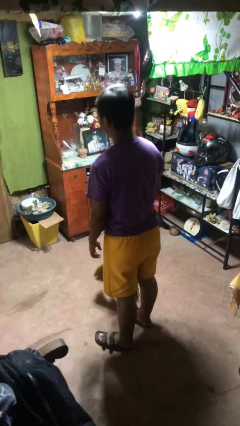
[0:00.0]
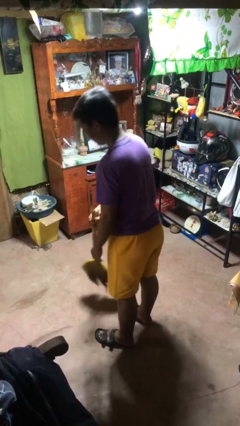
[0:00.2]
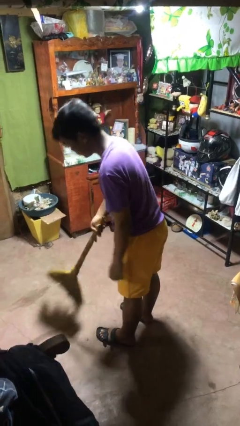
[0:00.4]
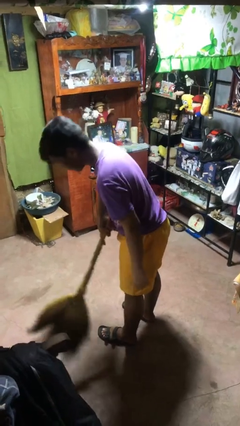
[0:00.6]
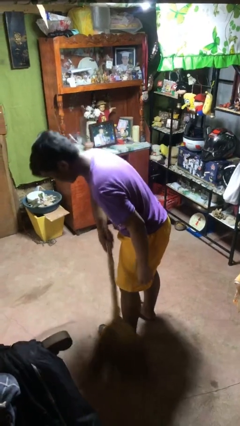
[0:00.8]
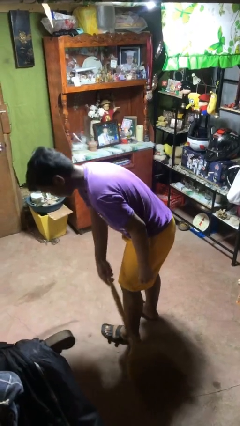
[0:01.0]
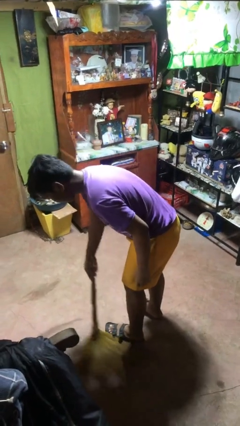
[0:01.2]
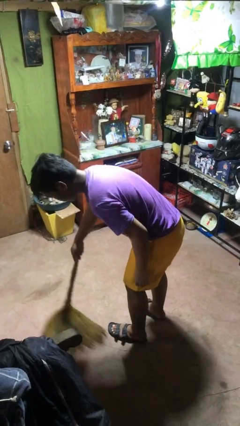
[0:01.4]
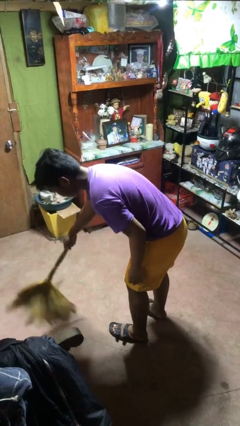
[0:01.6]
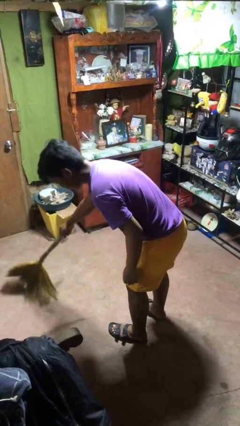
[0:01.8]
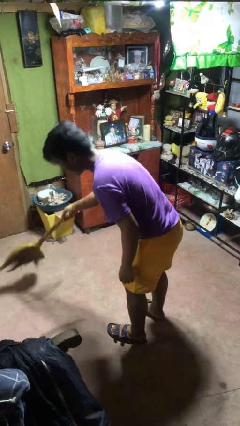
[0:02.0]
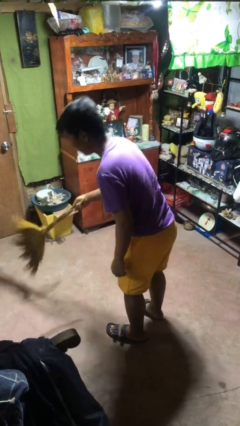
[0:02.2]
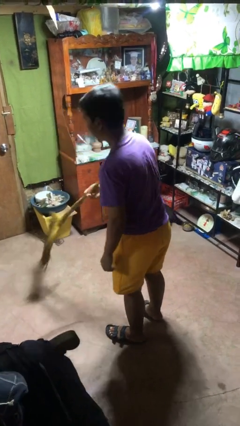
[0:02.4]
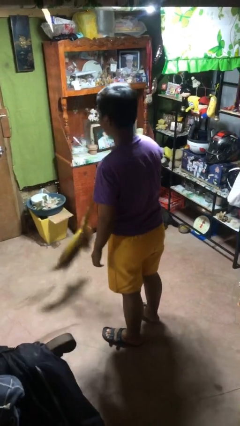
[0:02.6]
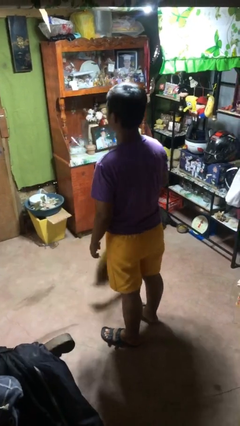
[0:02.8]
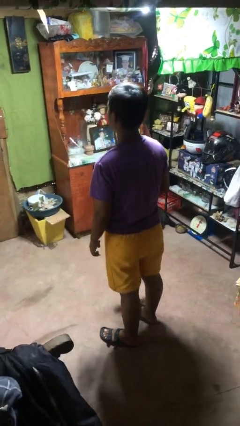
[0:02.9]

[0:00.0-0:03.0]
person sweeps floor

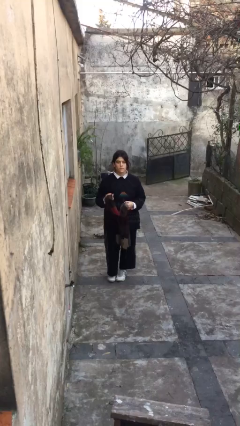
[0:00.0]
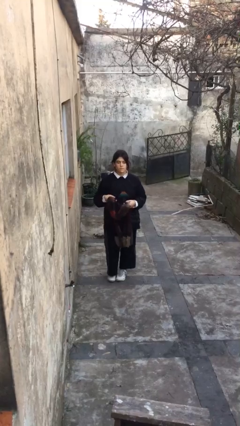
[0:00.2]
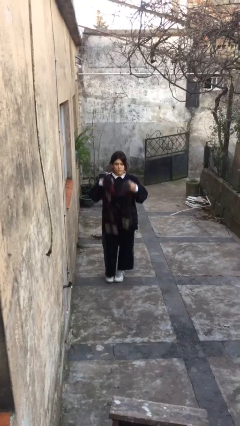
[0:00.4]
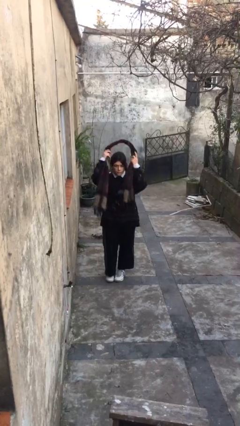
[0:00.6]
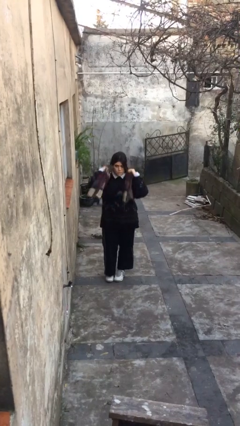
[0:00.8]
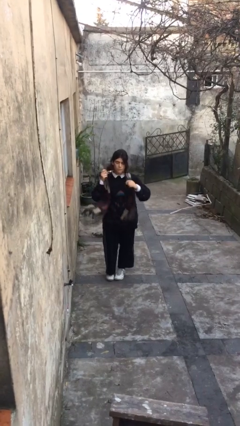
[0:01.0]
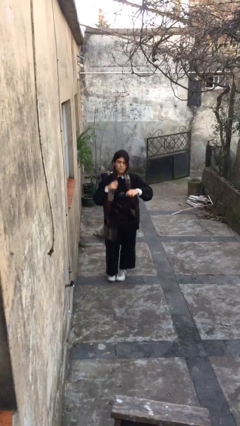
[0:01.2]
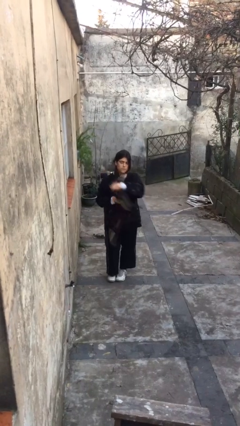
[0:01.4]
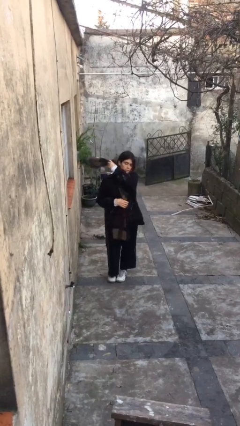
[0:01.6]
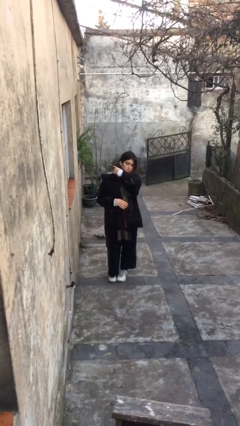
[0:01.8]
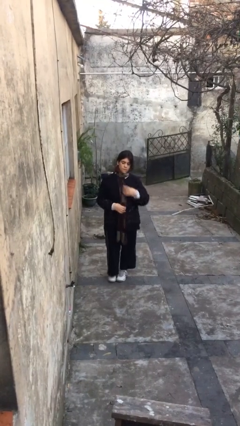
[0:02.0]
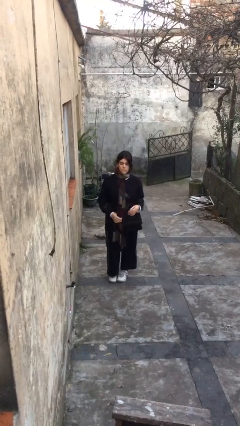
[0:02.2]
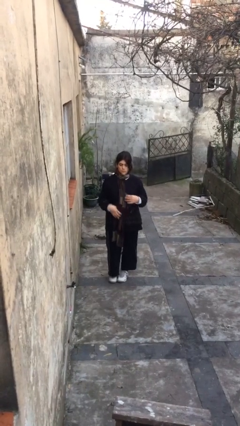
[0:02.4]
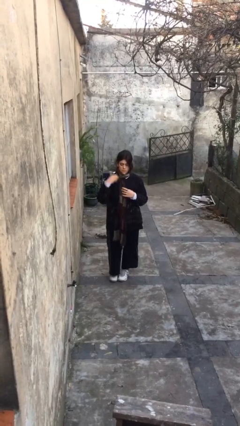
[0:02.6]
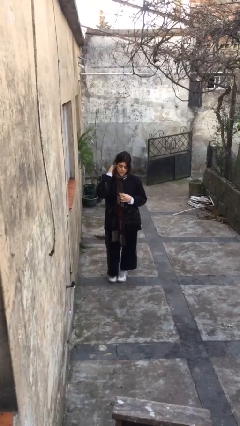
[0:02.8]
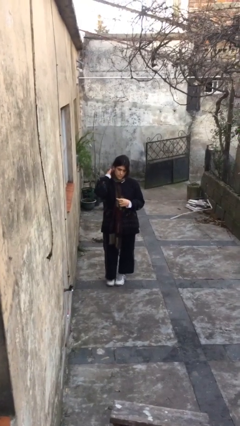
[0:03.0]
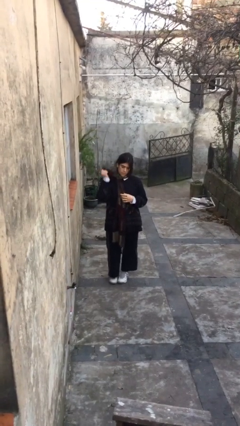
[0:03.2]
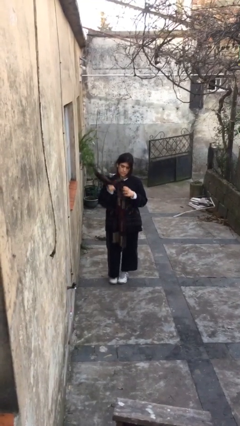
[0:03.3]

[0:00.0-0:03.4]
person puts on scarf

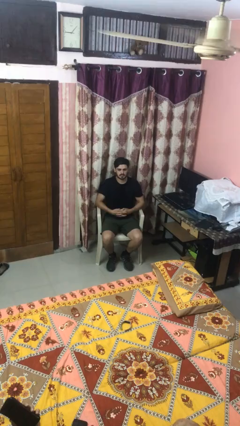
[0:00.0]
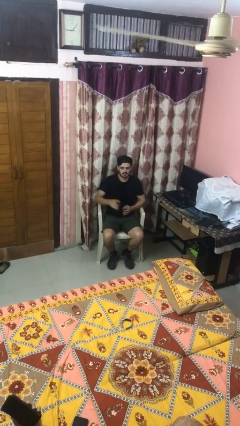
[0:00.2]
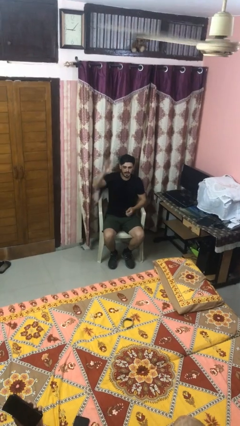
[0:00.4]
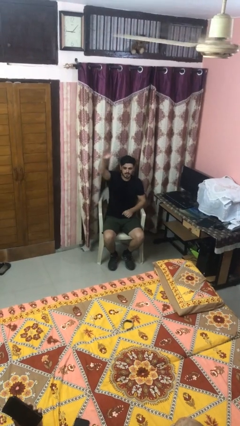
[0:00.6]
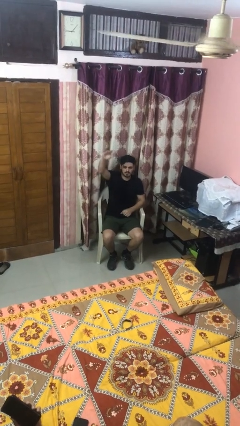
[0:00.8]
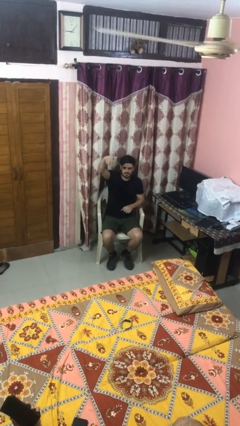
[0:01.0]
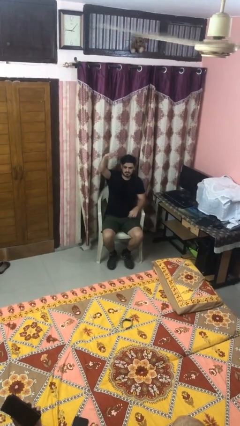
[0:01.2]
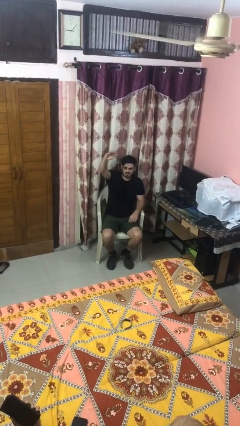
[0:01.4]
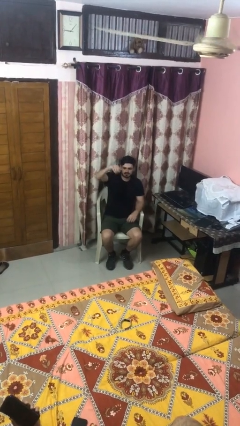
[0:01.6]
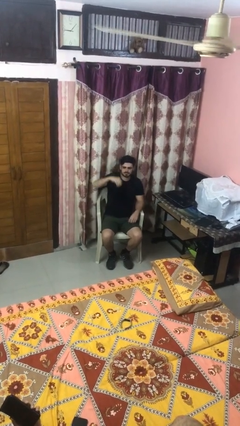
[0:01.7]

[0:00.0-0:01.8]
person gestures come here

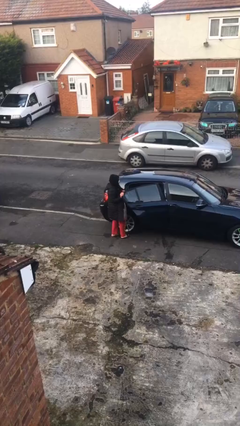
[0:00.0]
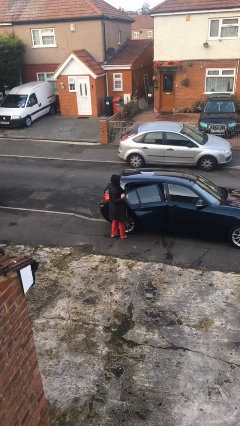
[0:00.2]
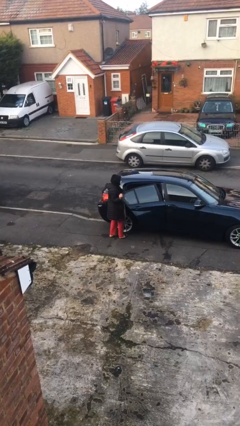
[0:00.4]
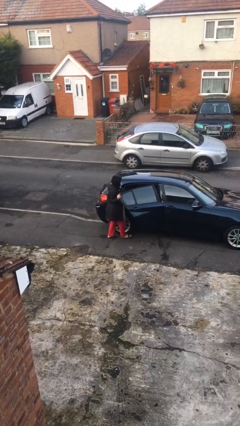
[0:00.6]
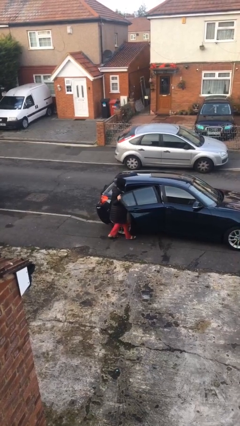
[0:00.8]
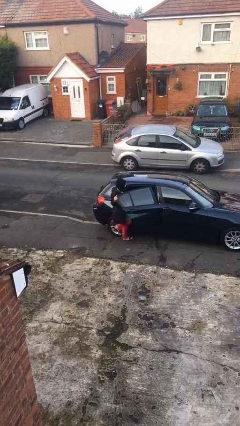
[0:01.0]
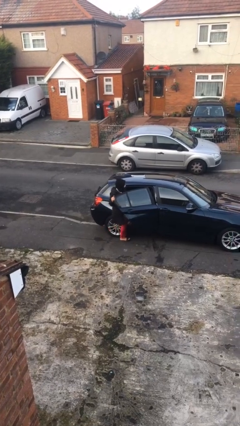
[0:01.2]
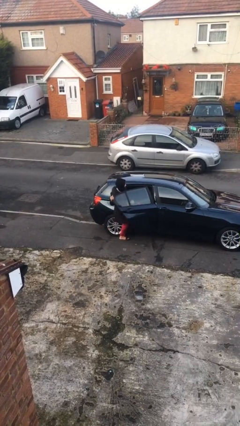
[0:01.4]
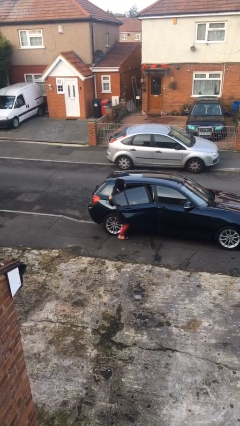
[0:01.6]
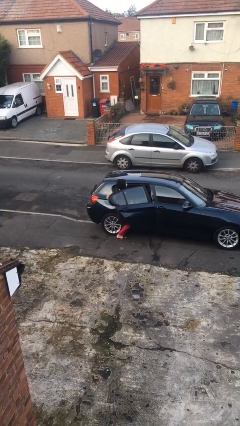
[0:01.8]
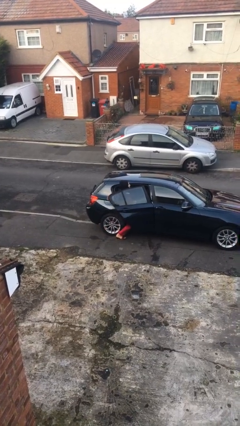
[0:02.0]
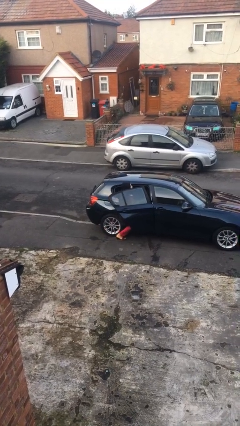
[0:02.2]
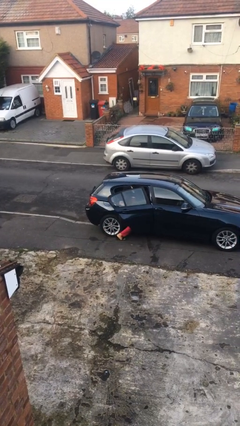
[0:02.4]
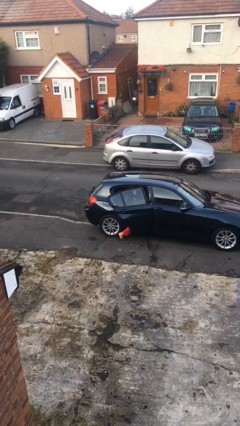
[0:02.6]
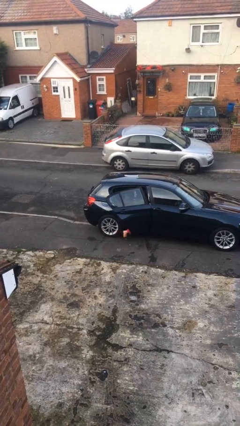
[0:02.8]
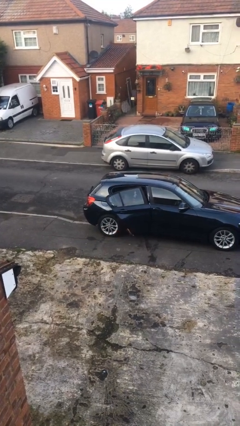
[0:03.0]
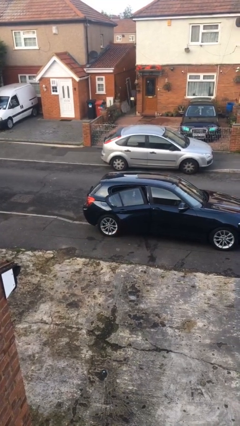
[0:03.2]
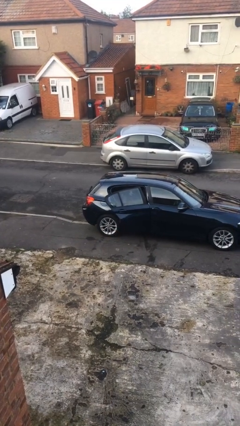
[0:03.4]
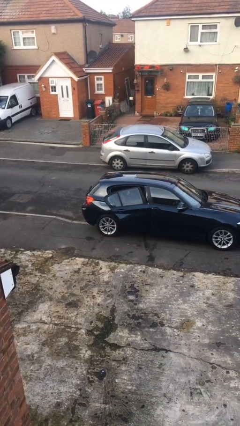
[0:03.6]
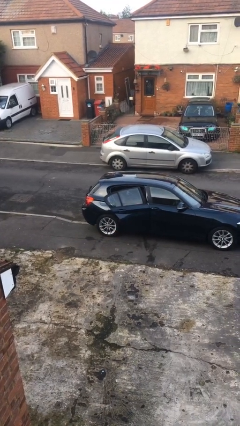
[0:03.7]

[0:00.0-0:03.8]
person enters car

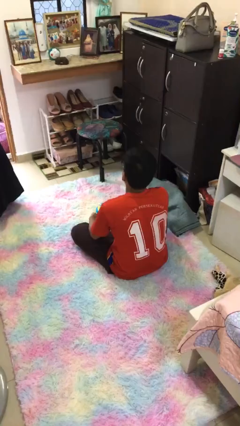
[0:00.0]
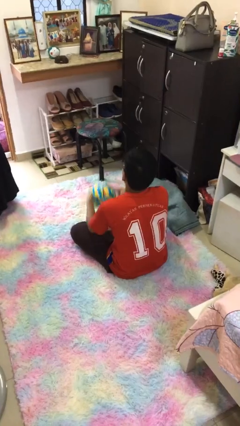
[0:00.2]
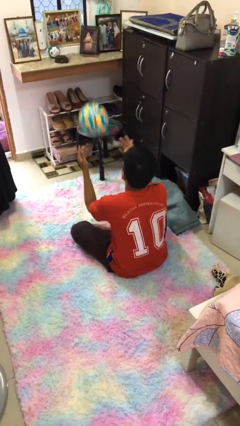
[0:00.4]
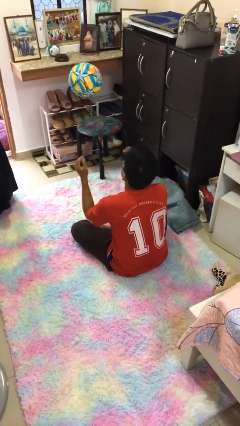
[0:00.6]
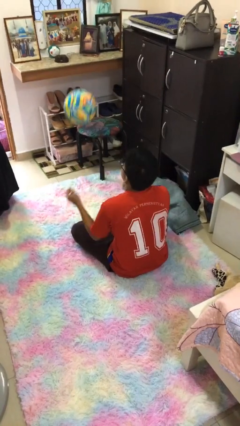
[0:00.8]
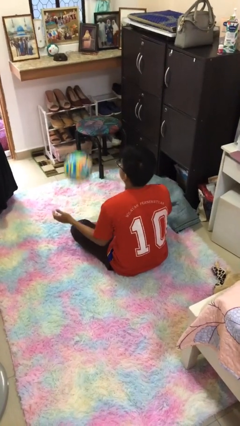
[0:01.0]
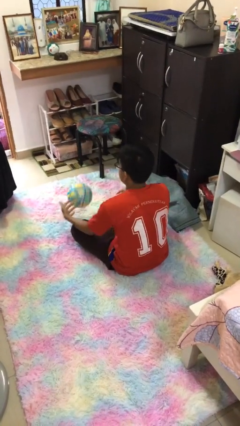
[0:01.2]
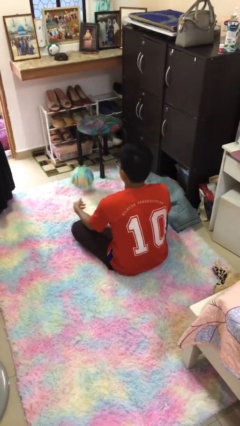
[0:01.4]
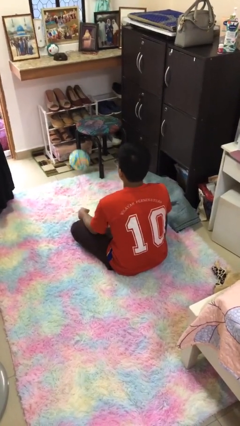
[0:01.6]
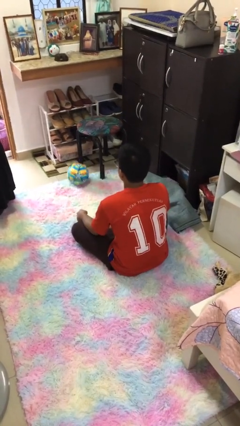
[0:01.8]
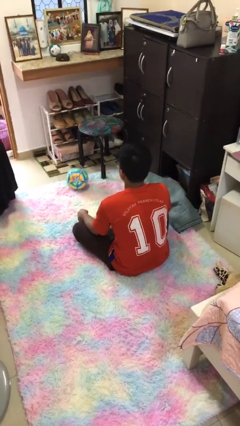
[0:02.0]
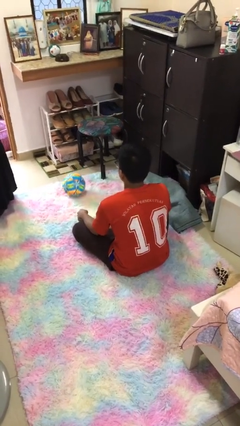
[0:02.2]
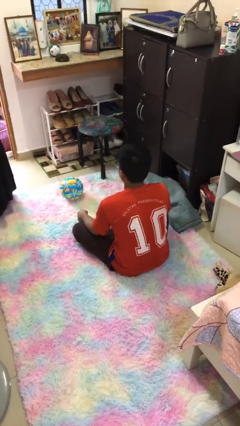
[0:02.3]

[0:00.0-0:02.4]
person bounces ball on floor

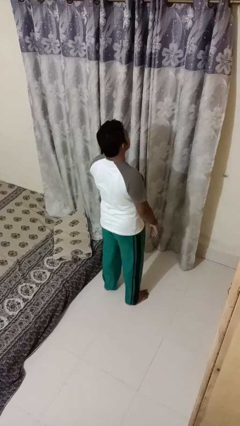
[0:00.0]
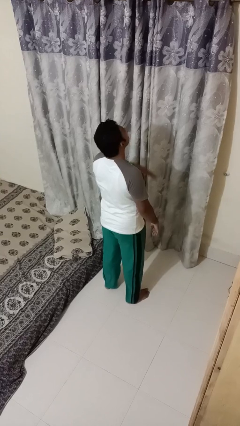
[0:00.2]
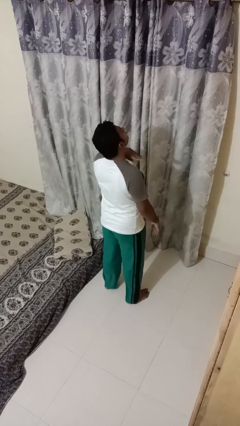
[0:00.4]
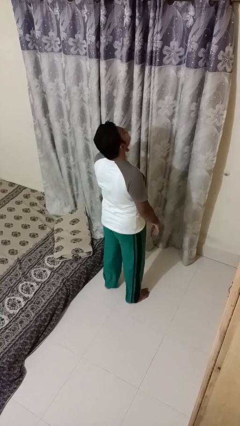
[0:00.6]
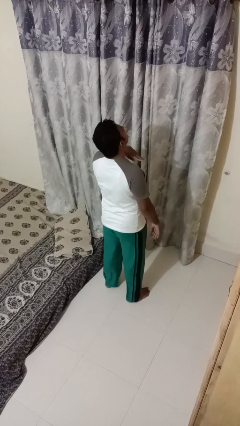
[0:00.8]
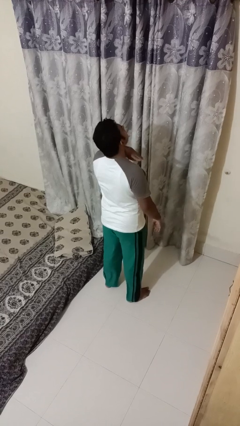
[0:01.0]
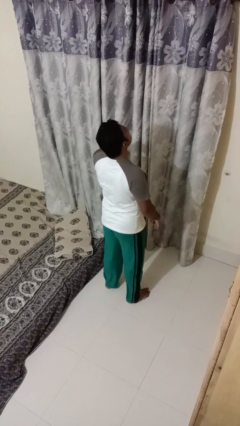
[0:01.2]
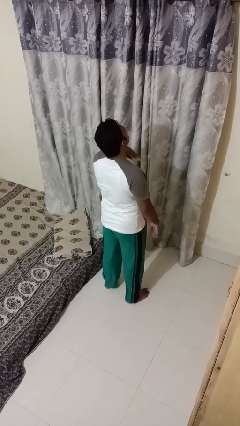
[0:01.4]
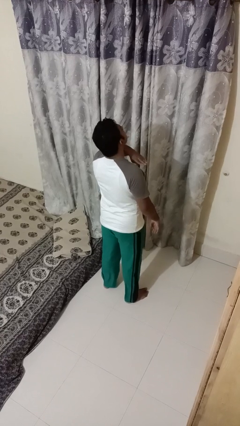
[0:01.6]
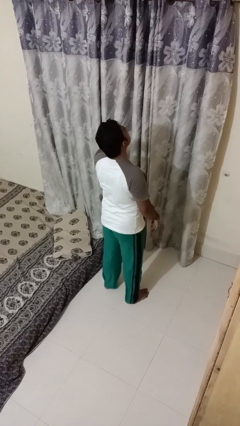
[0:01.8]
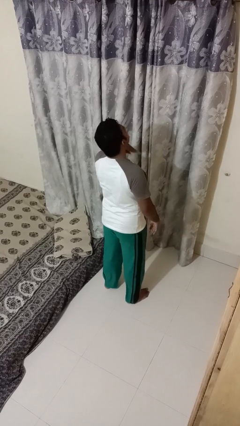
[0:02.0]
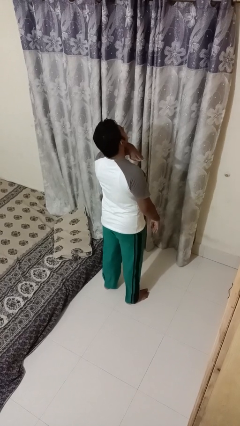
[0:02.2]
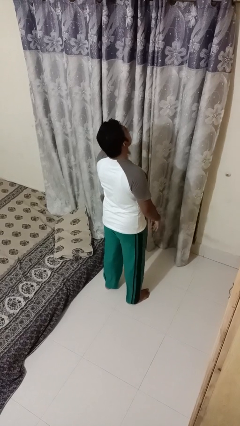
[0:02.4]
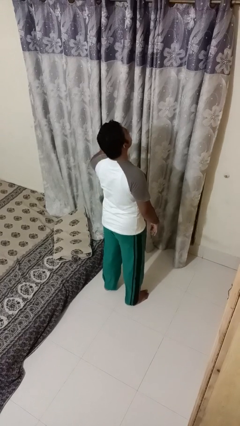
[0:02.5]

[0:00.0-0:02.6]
person gestures cut

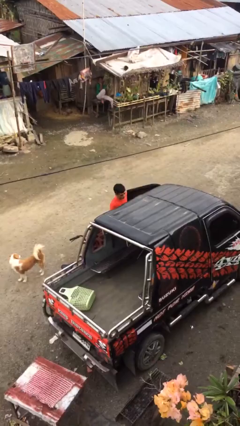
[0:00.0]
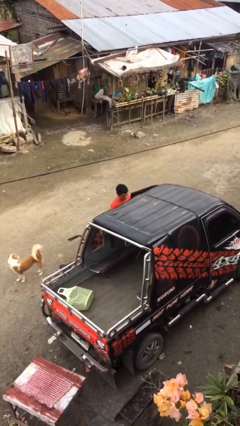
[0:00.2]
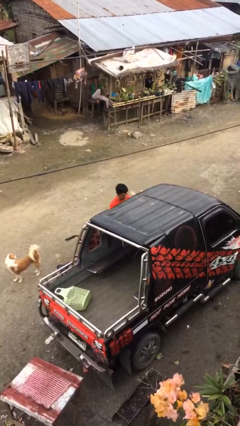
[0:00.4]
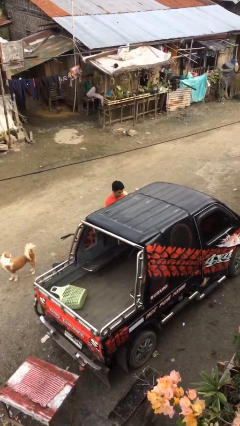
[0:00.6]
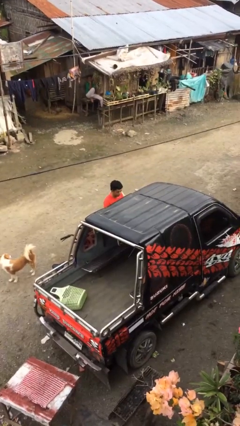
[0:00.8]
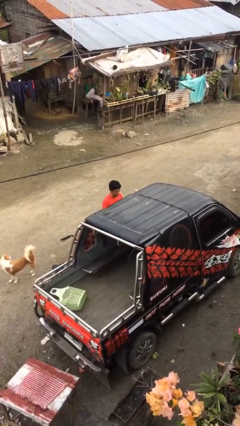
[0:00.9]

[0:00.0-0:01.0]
person closes car door
